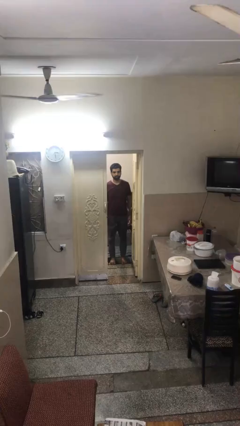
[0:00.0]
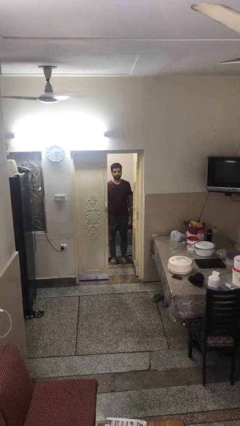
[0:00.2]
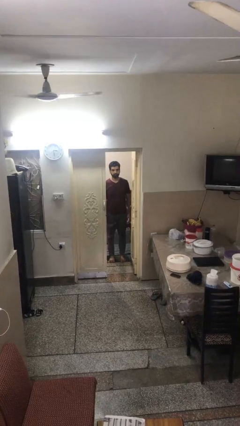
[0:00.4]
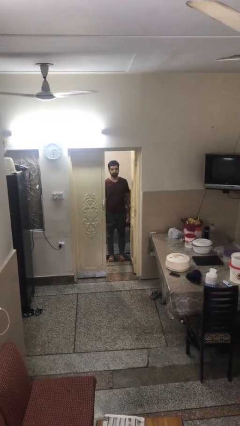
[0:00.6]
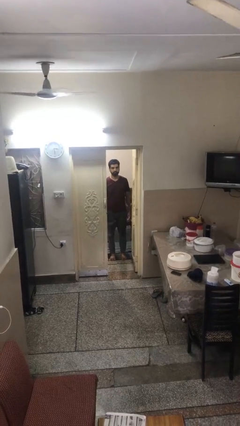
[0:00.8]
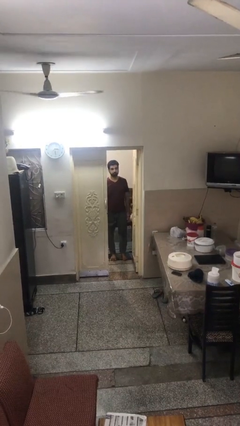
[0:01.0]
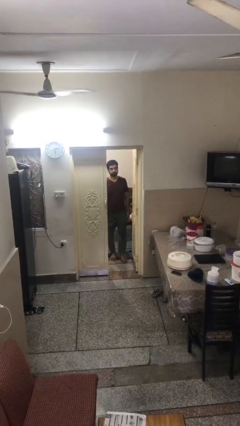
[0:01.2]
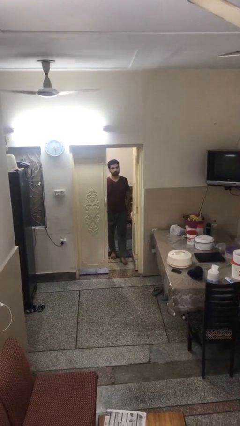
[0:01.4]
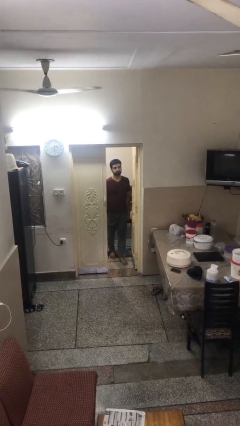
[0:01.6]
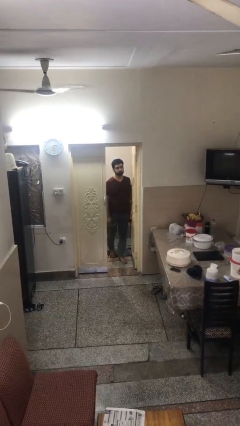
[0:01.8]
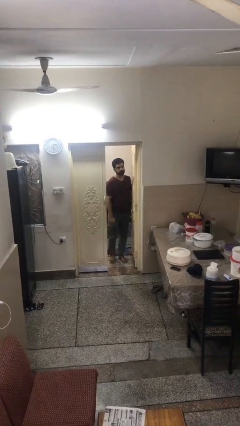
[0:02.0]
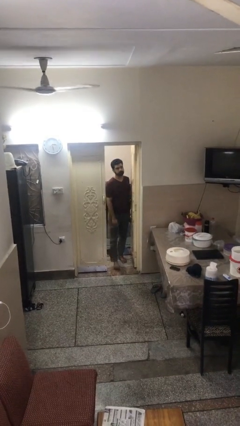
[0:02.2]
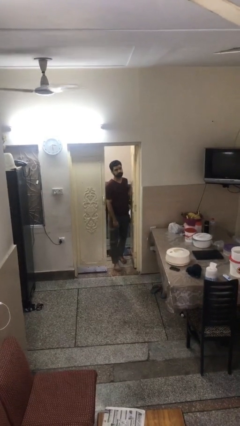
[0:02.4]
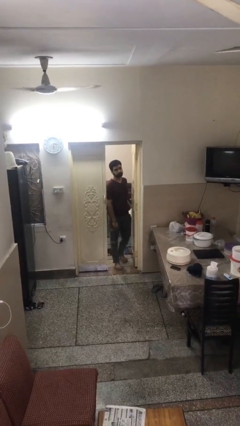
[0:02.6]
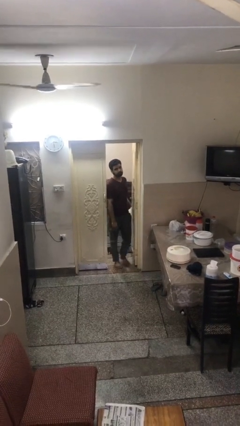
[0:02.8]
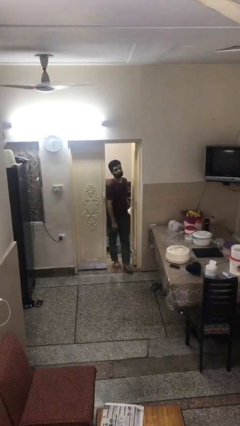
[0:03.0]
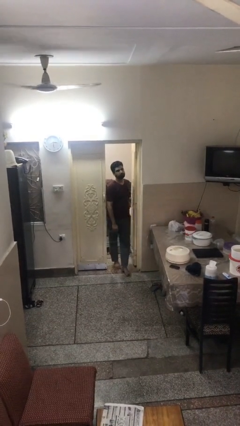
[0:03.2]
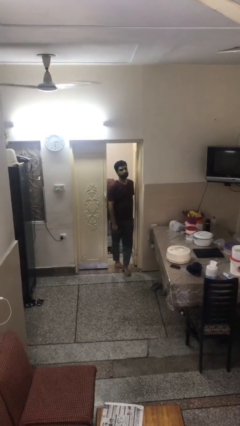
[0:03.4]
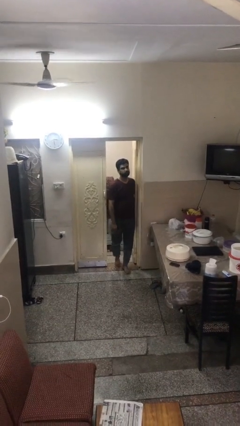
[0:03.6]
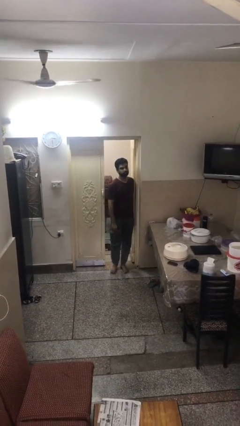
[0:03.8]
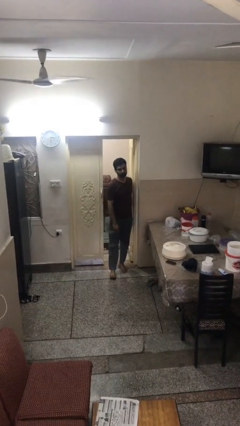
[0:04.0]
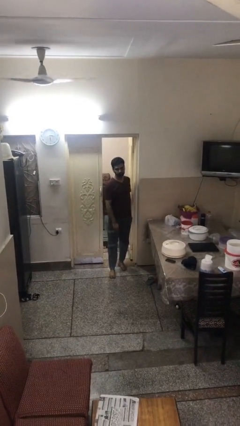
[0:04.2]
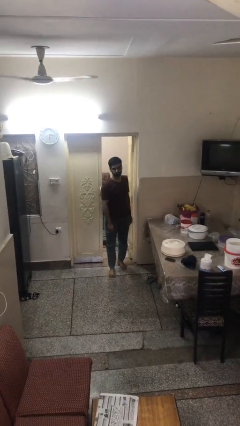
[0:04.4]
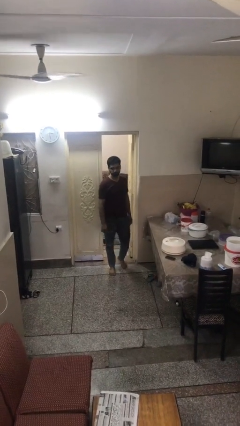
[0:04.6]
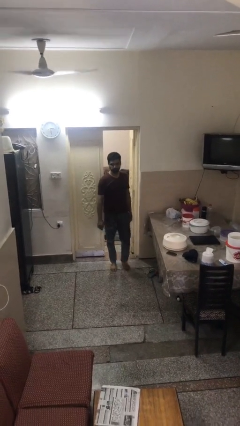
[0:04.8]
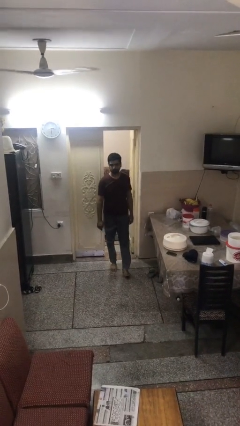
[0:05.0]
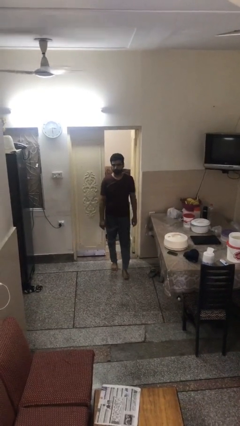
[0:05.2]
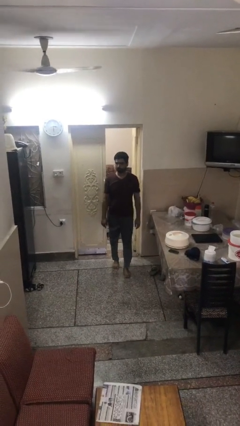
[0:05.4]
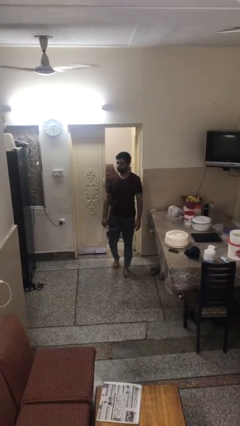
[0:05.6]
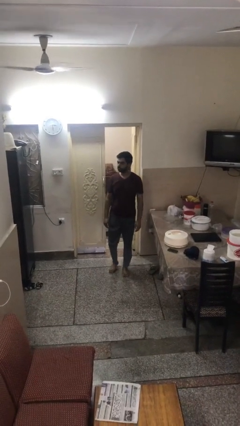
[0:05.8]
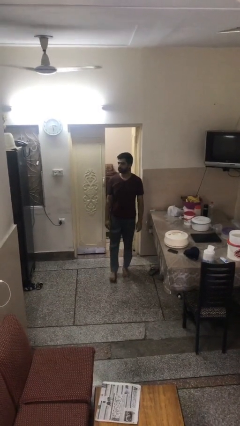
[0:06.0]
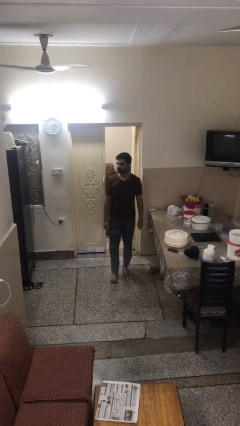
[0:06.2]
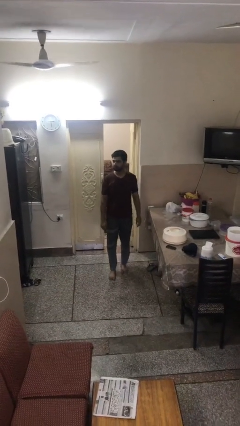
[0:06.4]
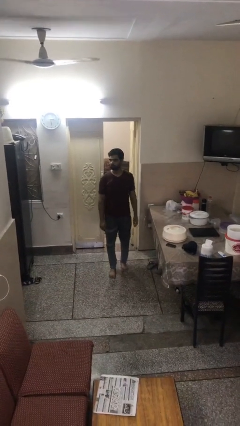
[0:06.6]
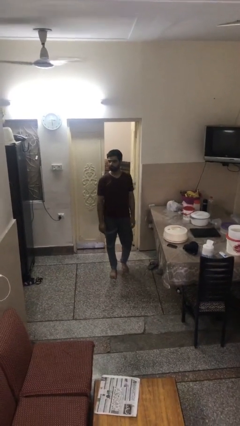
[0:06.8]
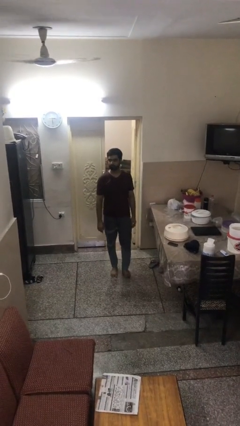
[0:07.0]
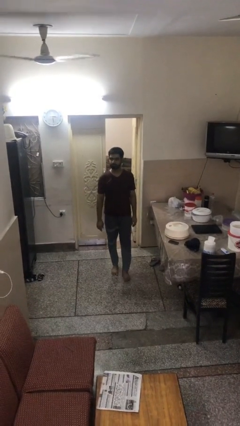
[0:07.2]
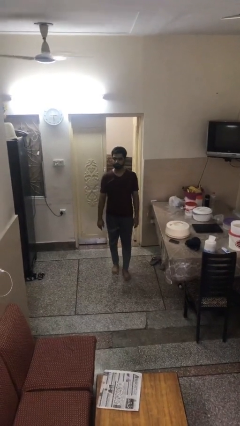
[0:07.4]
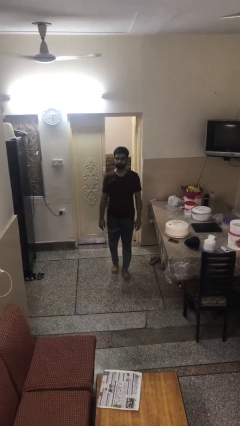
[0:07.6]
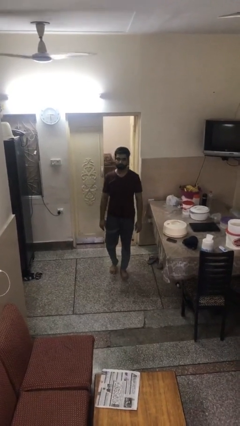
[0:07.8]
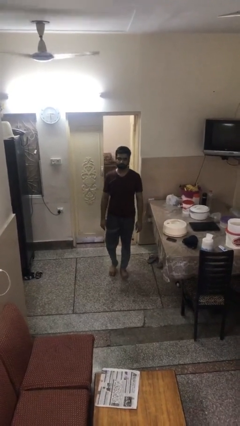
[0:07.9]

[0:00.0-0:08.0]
person enters scene through structure

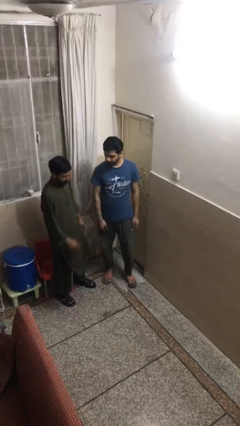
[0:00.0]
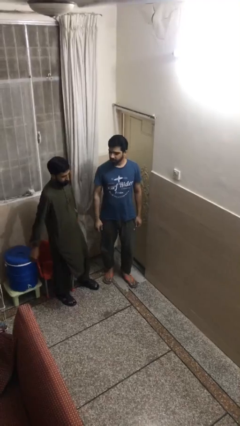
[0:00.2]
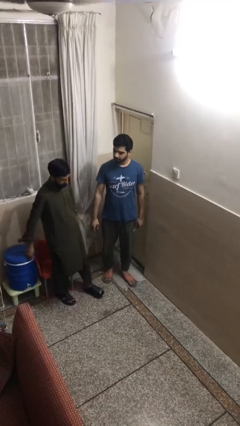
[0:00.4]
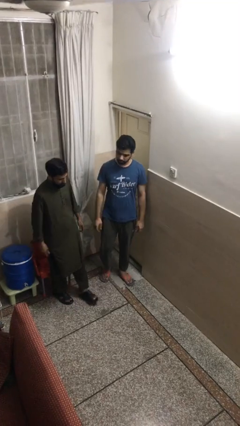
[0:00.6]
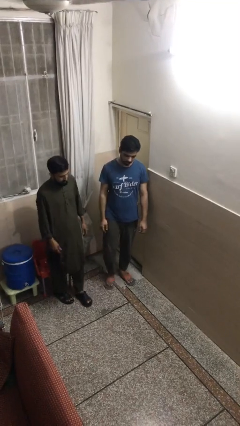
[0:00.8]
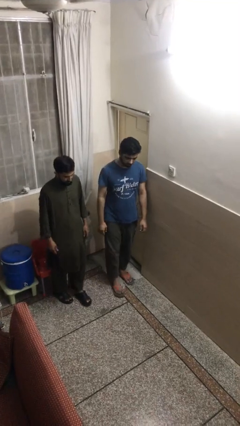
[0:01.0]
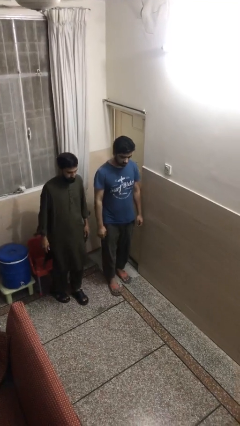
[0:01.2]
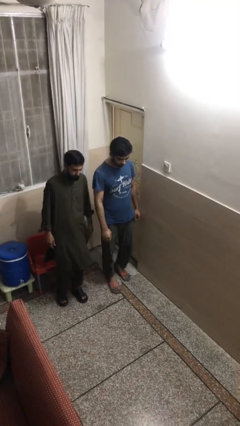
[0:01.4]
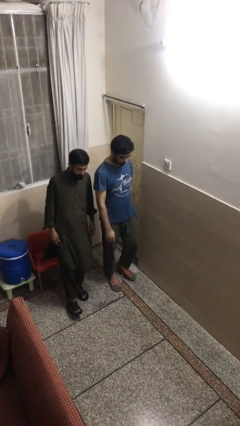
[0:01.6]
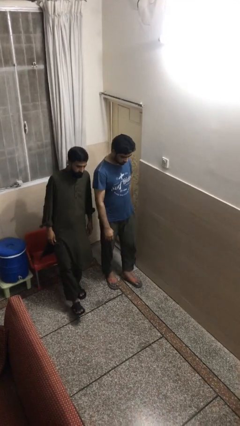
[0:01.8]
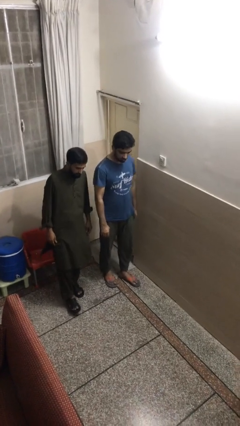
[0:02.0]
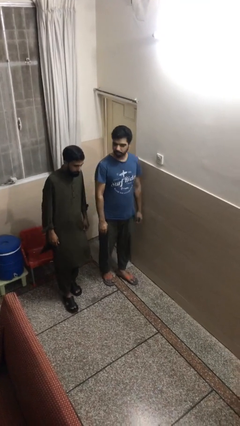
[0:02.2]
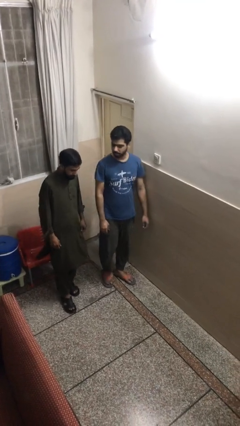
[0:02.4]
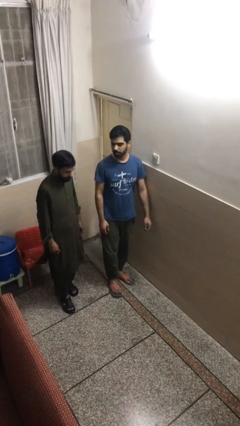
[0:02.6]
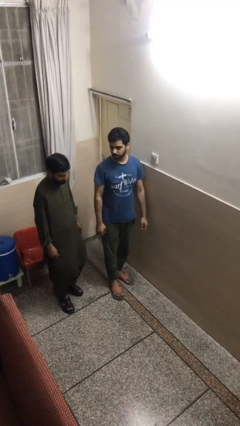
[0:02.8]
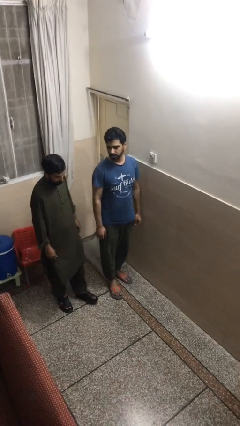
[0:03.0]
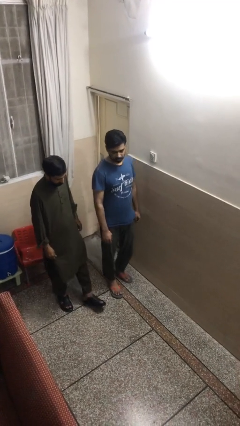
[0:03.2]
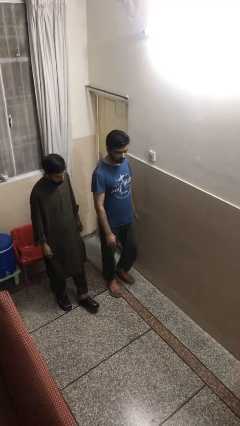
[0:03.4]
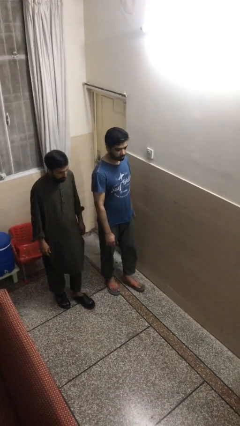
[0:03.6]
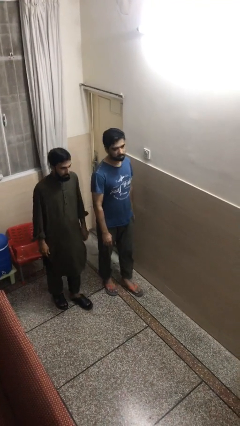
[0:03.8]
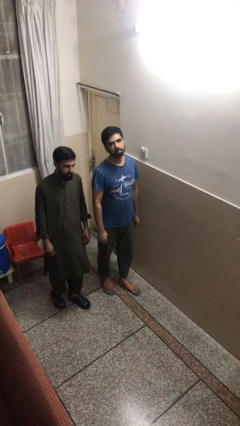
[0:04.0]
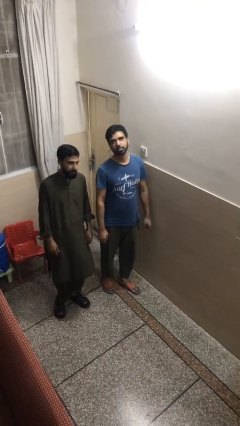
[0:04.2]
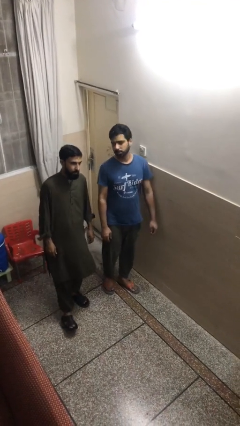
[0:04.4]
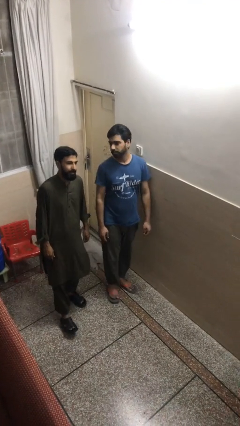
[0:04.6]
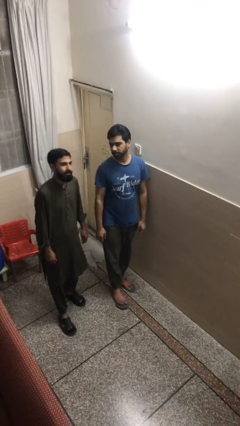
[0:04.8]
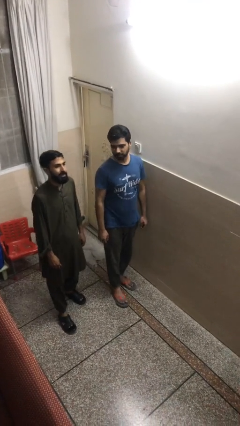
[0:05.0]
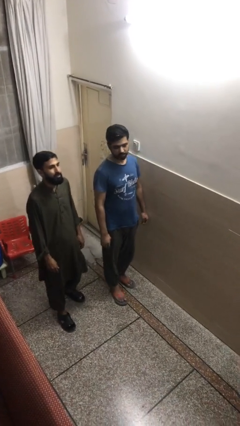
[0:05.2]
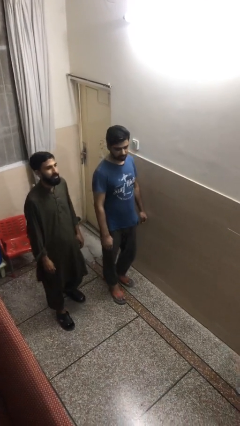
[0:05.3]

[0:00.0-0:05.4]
person talks to person

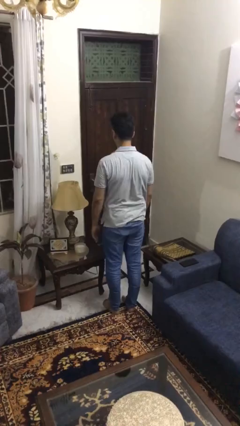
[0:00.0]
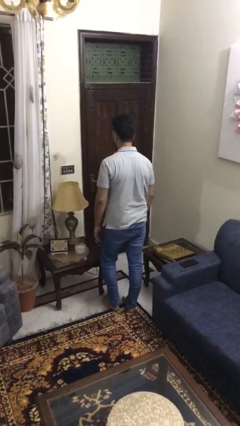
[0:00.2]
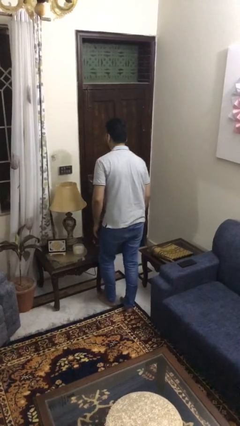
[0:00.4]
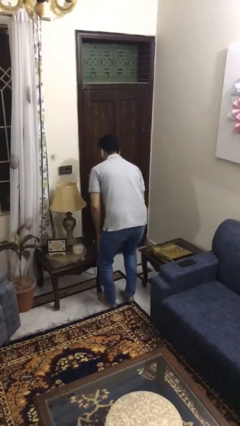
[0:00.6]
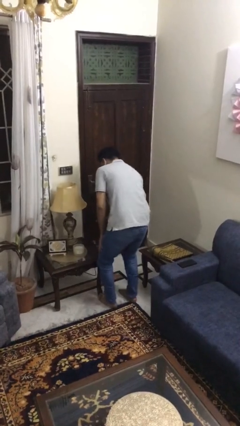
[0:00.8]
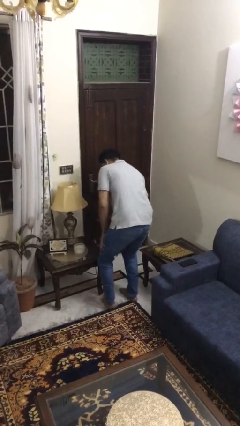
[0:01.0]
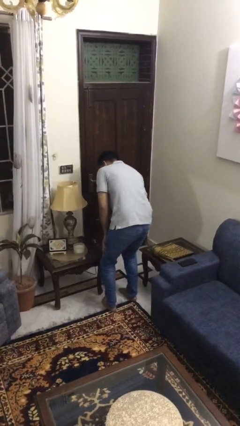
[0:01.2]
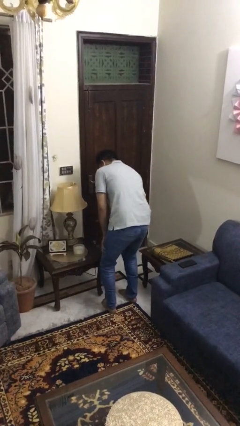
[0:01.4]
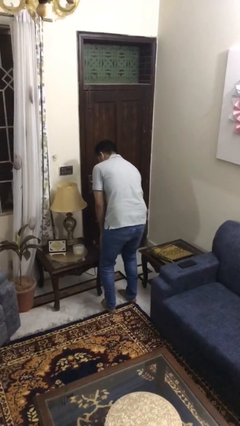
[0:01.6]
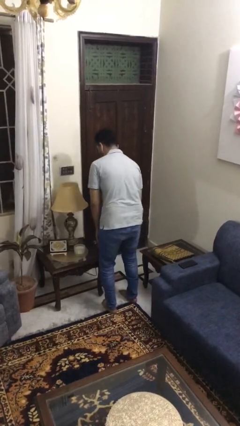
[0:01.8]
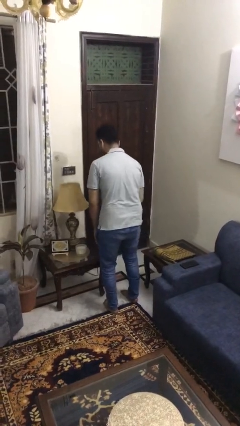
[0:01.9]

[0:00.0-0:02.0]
person stubs toe

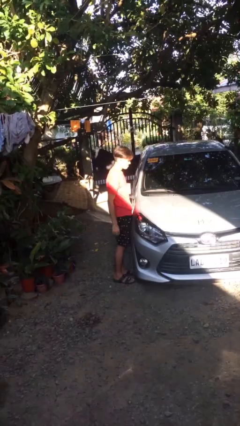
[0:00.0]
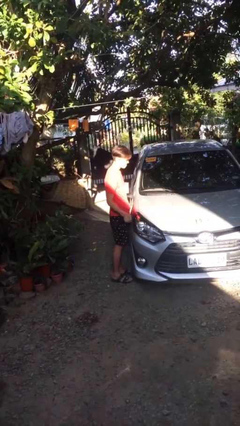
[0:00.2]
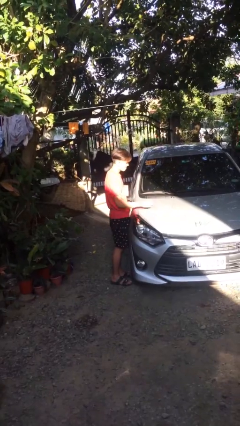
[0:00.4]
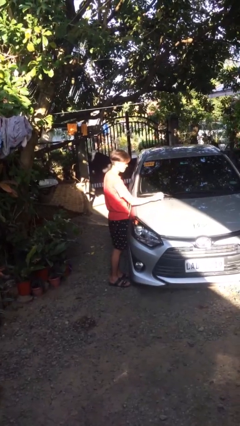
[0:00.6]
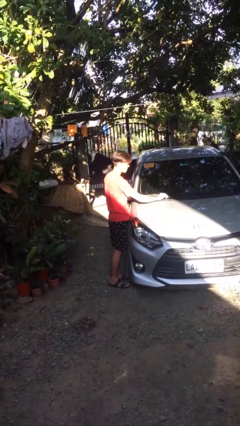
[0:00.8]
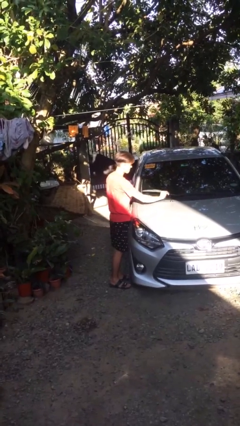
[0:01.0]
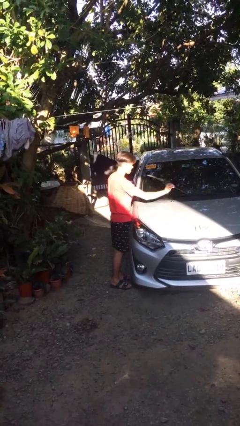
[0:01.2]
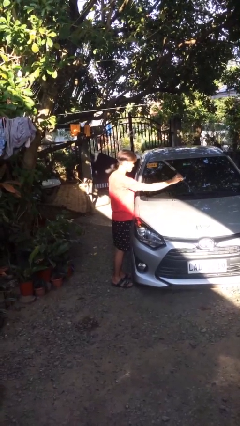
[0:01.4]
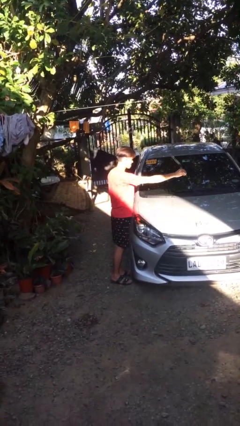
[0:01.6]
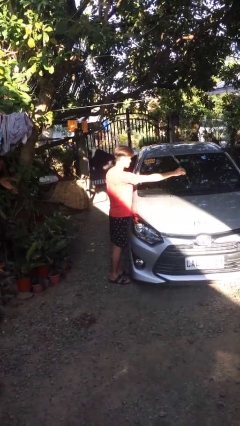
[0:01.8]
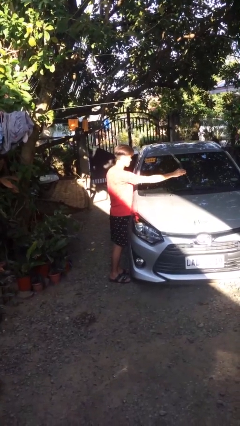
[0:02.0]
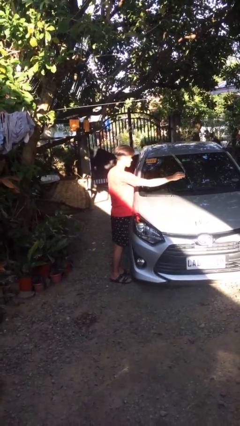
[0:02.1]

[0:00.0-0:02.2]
person flips up car wipers
